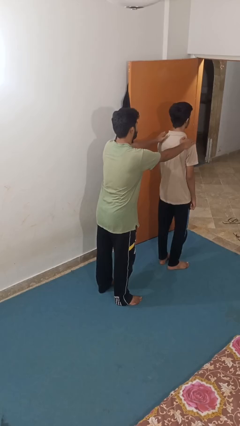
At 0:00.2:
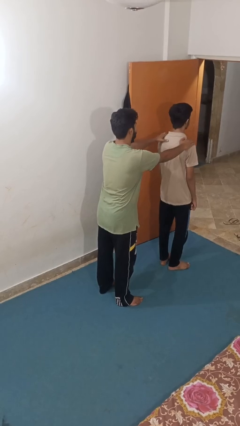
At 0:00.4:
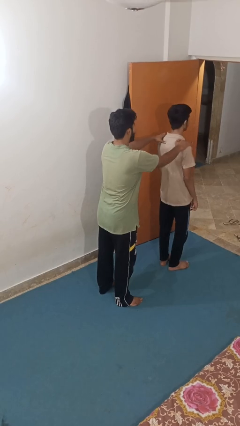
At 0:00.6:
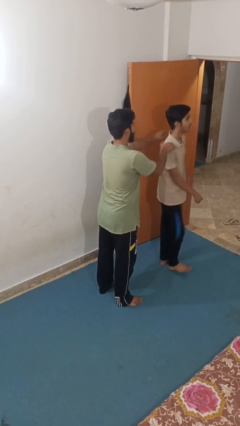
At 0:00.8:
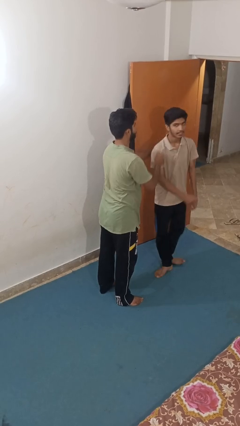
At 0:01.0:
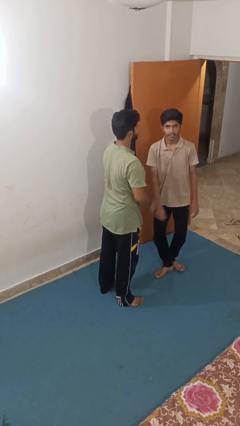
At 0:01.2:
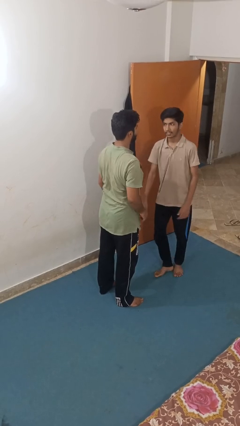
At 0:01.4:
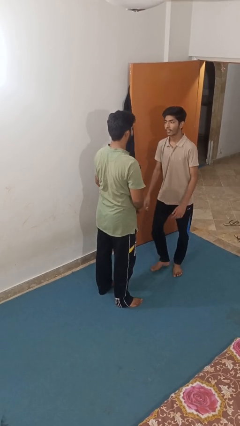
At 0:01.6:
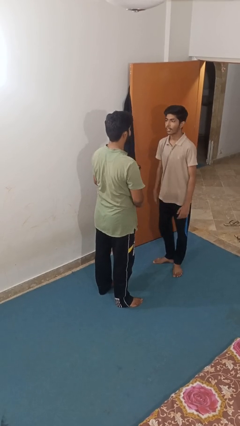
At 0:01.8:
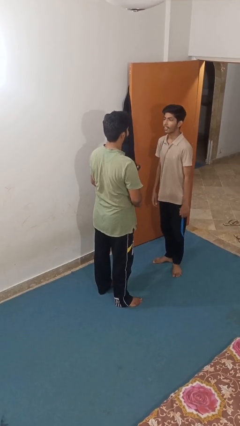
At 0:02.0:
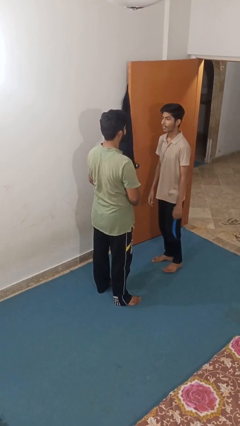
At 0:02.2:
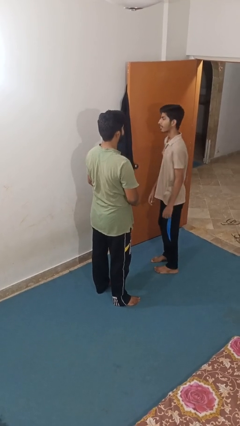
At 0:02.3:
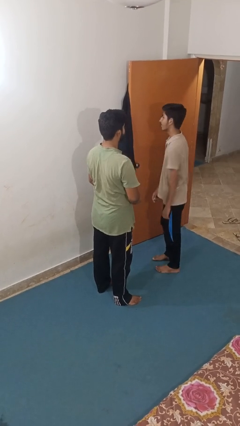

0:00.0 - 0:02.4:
person spins person around

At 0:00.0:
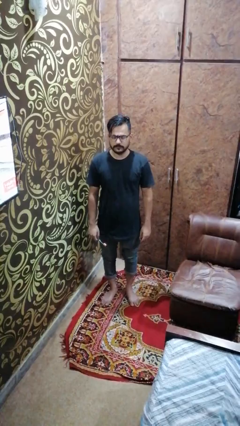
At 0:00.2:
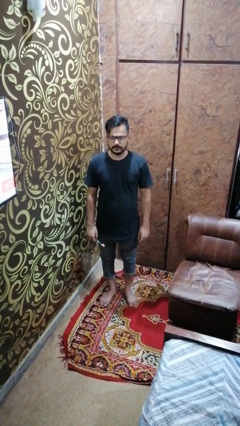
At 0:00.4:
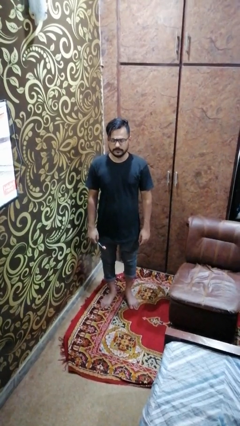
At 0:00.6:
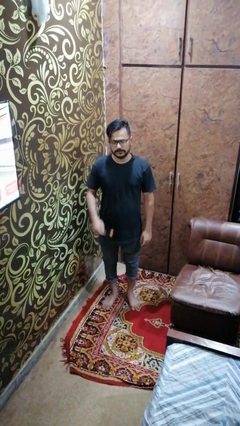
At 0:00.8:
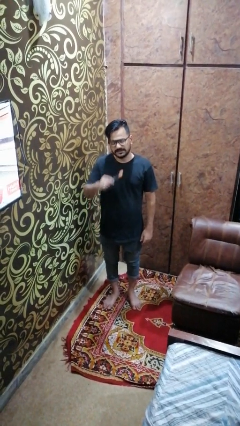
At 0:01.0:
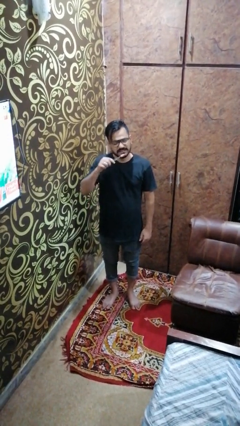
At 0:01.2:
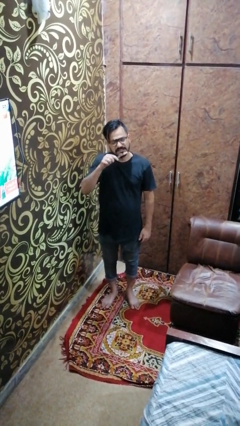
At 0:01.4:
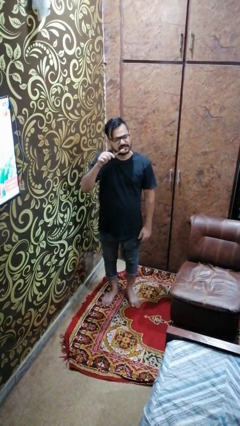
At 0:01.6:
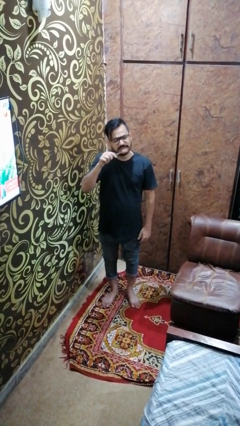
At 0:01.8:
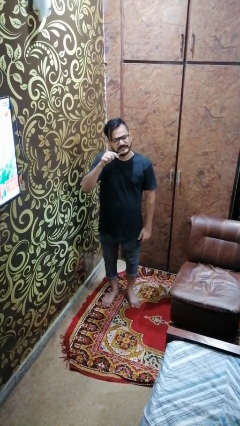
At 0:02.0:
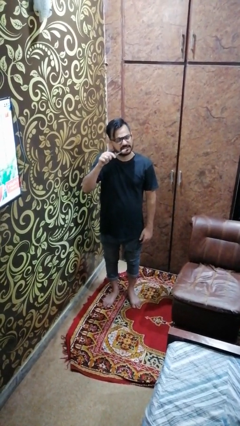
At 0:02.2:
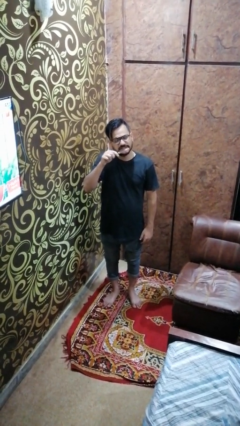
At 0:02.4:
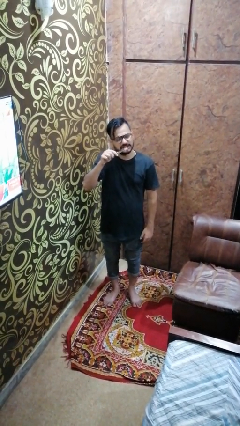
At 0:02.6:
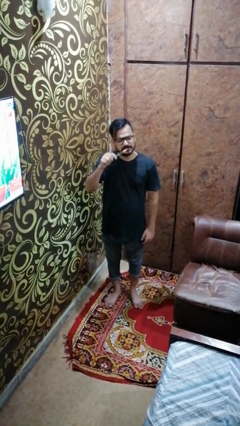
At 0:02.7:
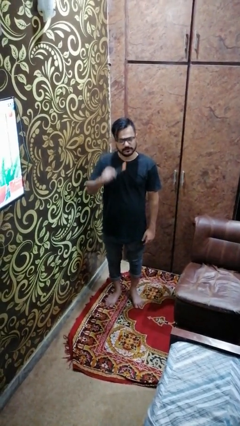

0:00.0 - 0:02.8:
person brushes teeth

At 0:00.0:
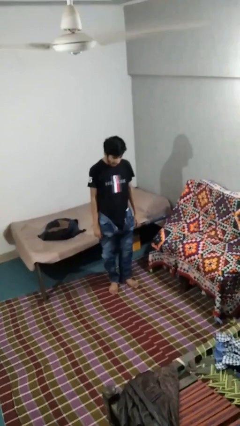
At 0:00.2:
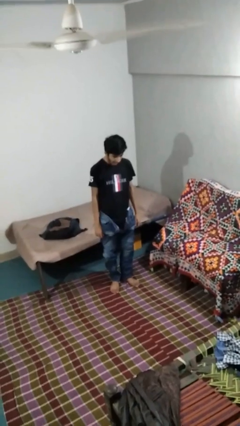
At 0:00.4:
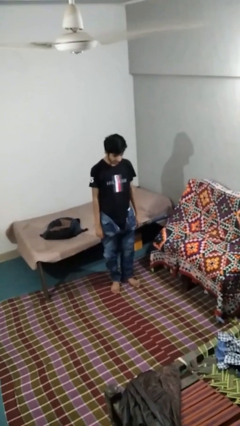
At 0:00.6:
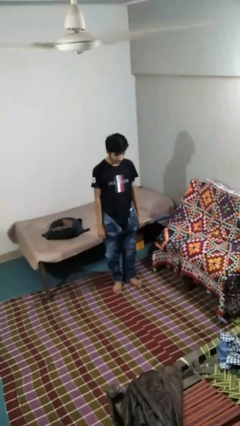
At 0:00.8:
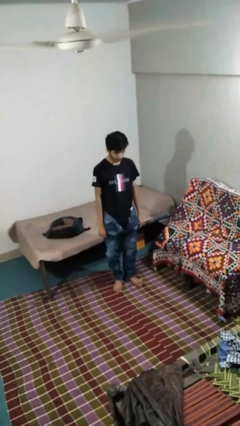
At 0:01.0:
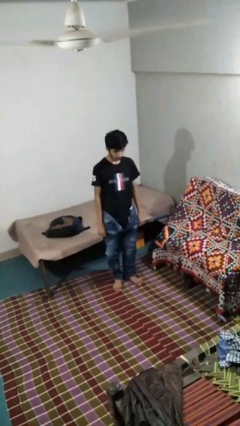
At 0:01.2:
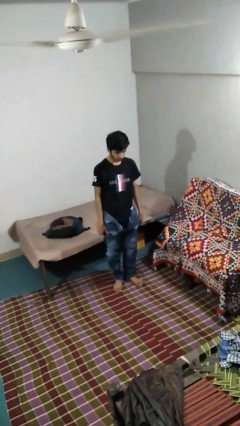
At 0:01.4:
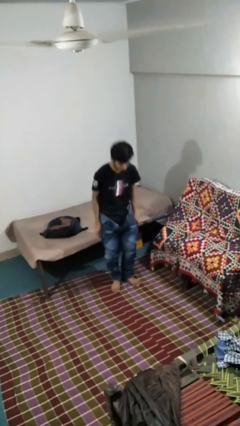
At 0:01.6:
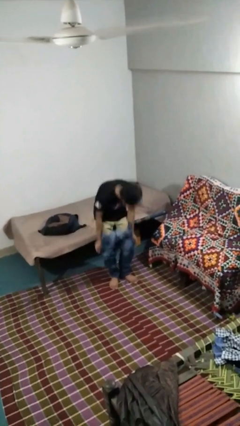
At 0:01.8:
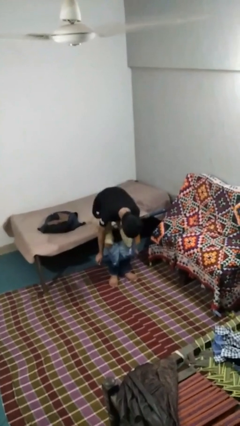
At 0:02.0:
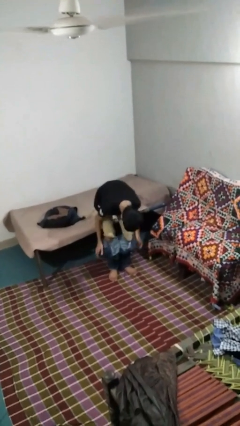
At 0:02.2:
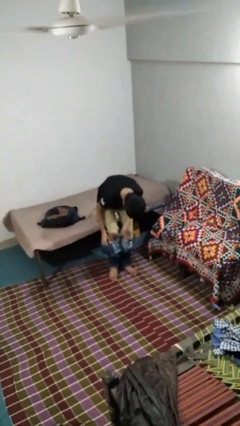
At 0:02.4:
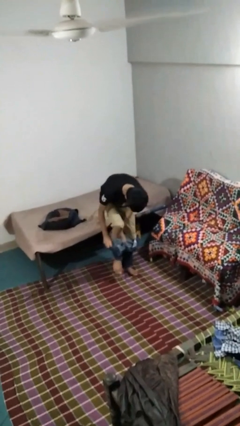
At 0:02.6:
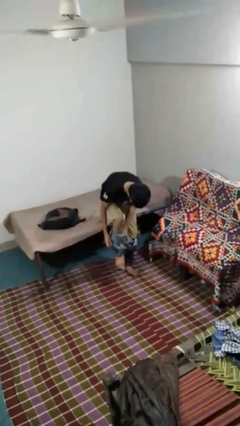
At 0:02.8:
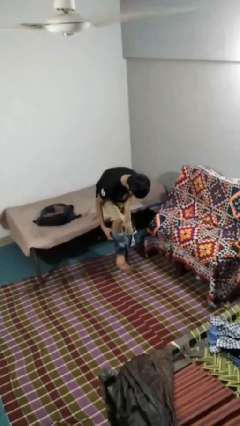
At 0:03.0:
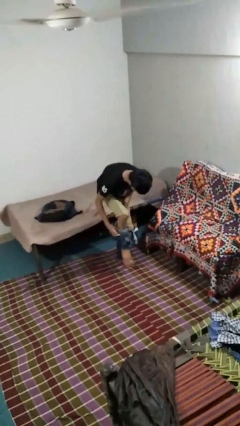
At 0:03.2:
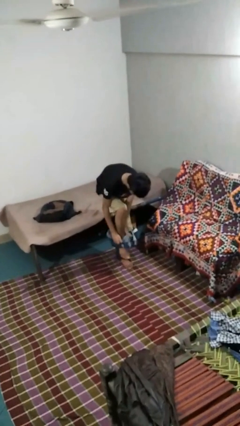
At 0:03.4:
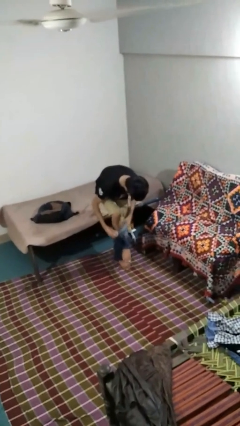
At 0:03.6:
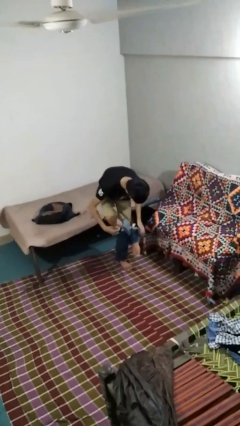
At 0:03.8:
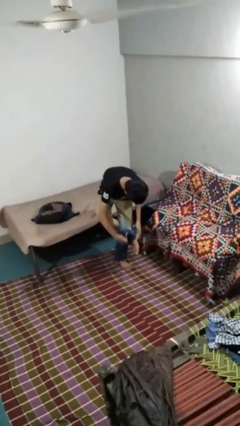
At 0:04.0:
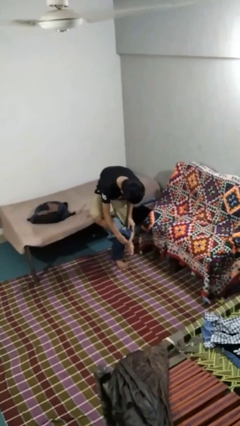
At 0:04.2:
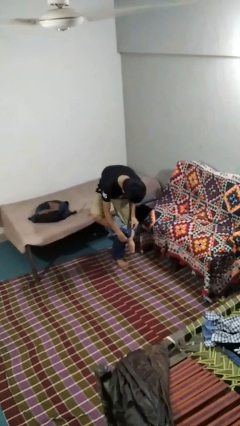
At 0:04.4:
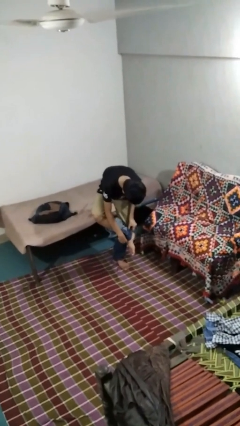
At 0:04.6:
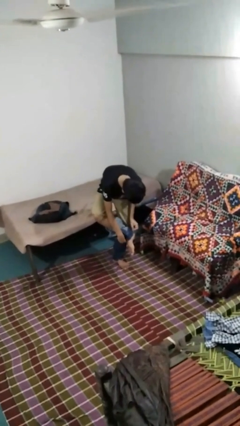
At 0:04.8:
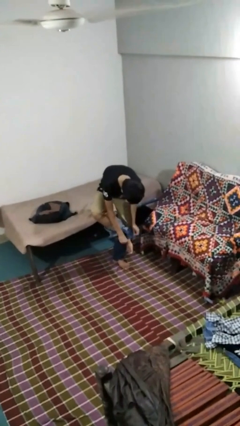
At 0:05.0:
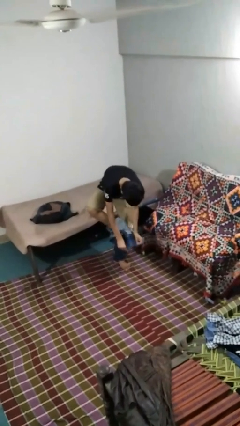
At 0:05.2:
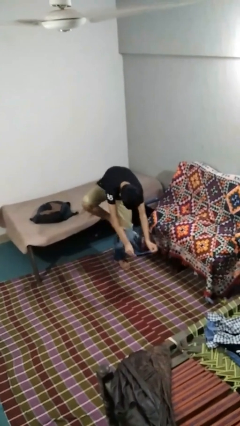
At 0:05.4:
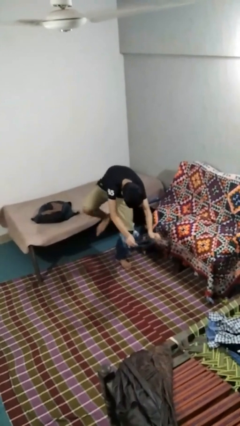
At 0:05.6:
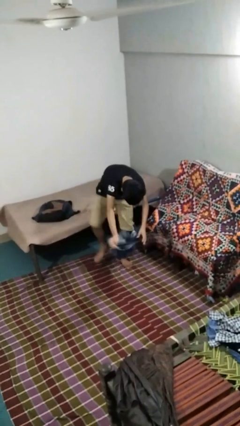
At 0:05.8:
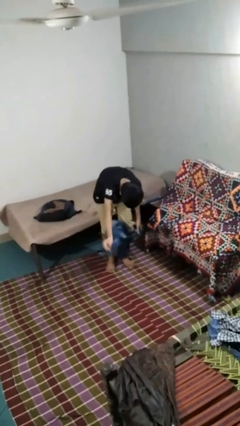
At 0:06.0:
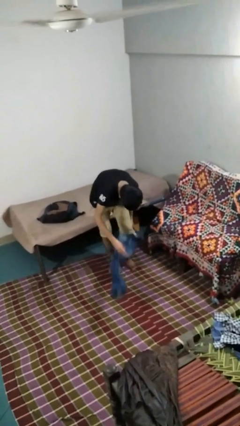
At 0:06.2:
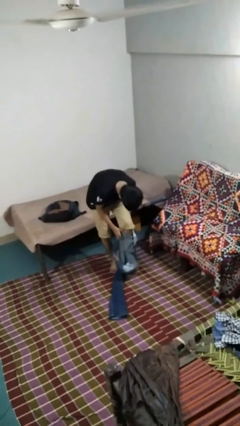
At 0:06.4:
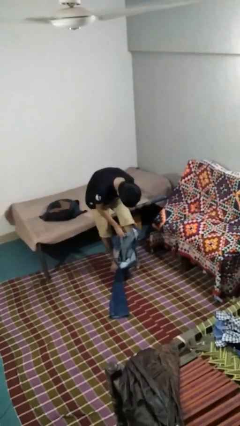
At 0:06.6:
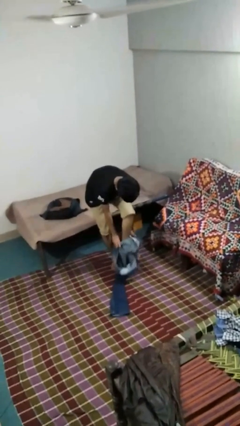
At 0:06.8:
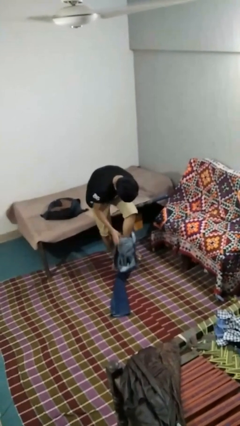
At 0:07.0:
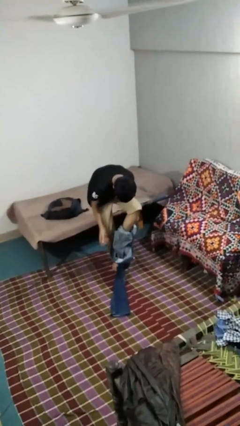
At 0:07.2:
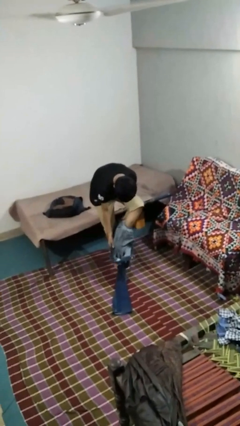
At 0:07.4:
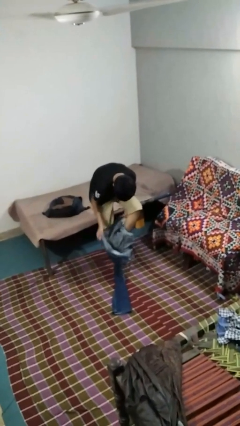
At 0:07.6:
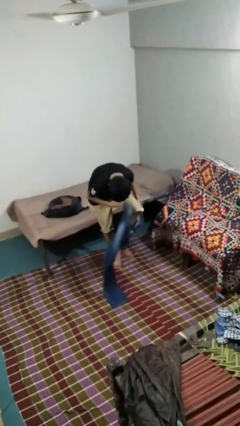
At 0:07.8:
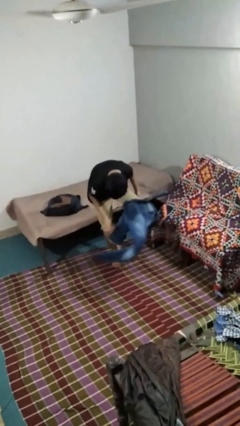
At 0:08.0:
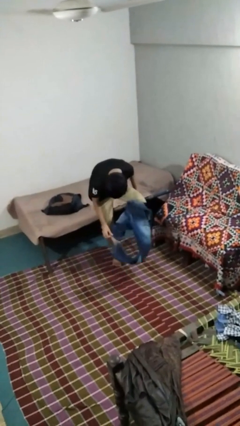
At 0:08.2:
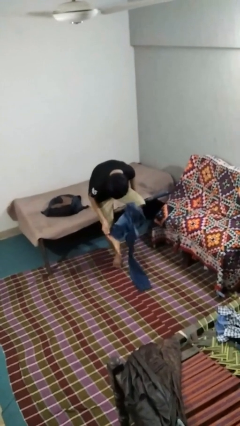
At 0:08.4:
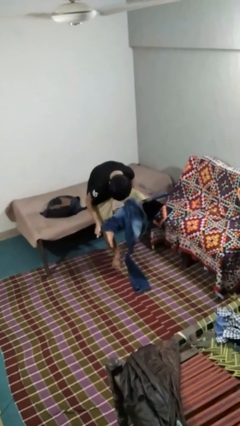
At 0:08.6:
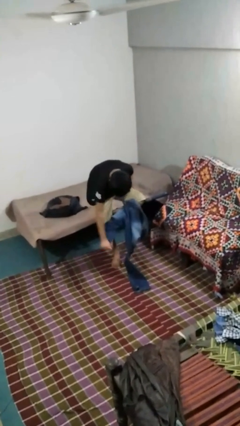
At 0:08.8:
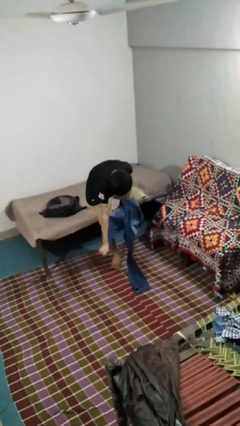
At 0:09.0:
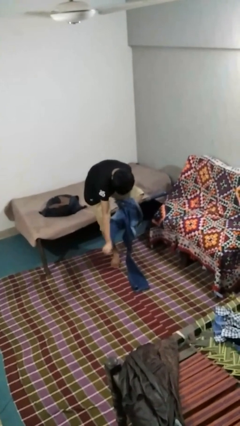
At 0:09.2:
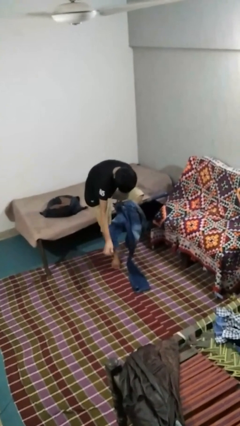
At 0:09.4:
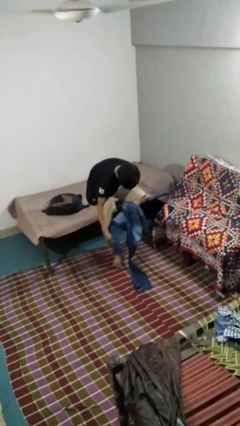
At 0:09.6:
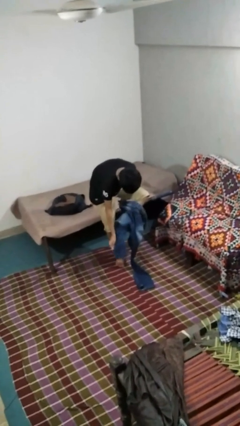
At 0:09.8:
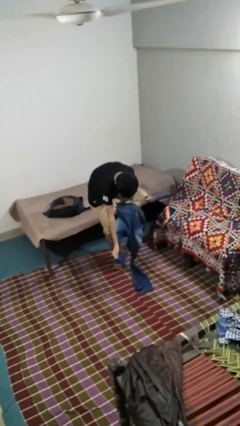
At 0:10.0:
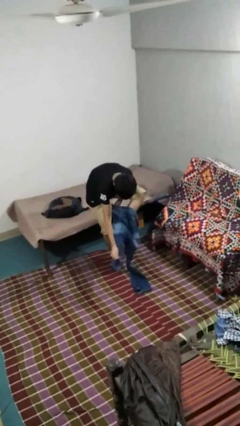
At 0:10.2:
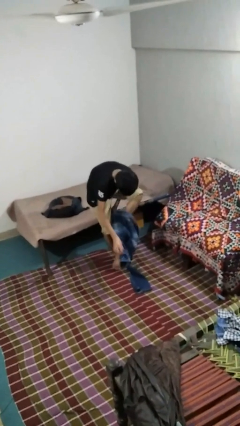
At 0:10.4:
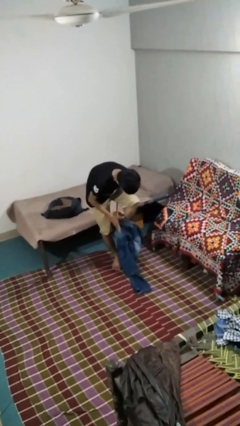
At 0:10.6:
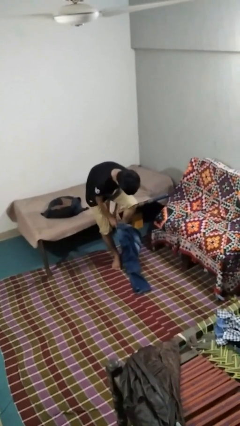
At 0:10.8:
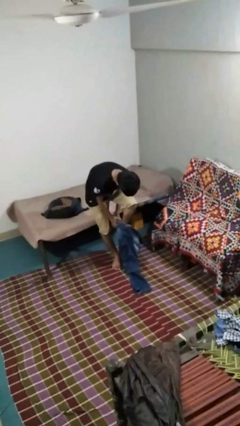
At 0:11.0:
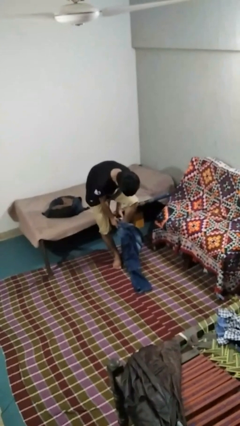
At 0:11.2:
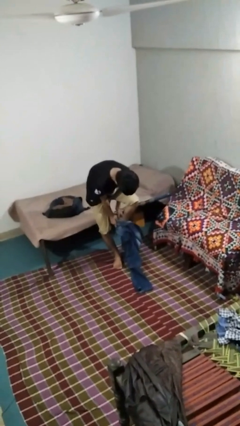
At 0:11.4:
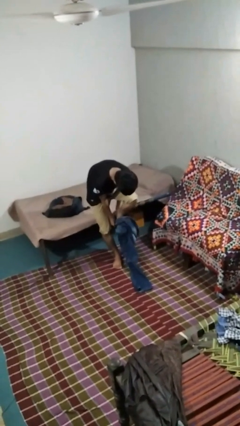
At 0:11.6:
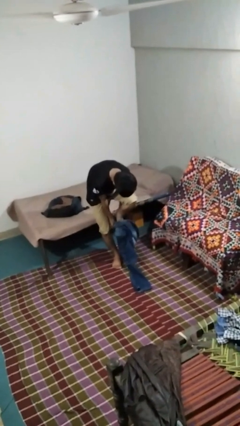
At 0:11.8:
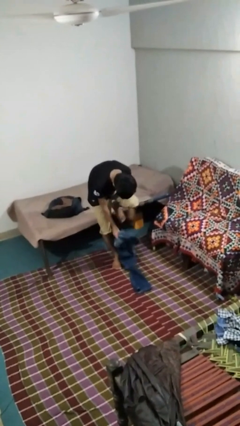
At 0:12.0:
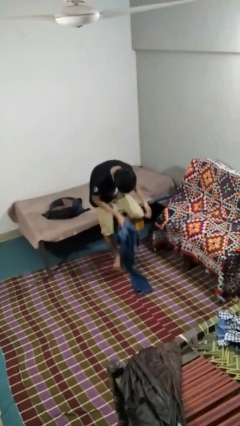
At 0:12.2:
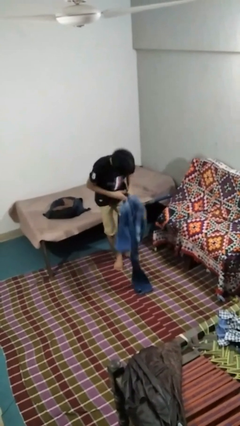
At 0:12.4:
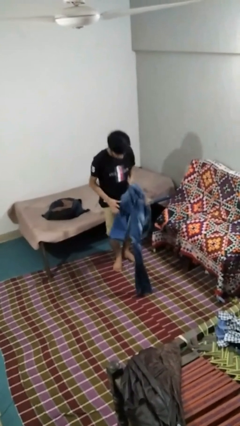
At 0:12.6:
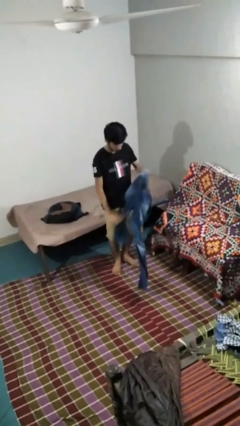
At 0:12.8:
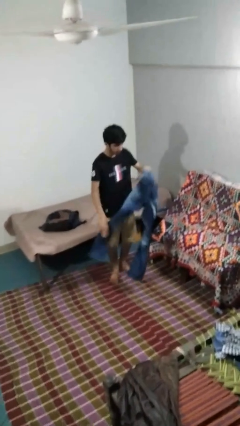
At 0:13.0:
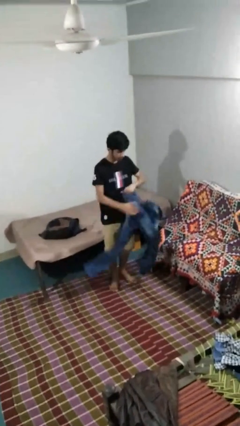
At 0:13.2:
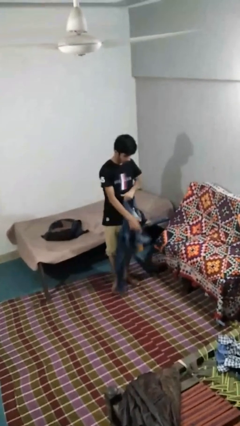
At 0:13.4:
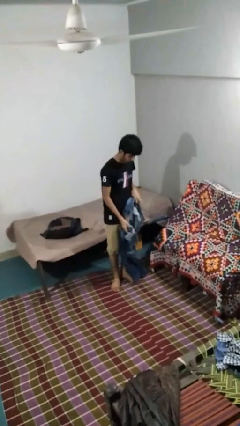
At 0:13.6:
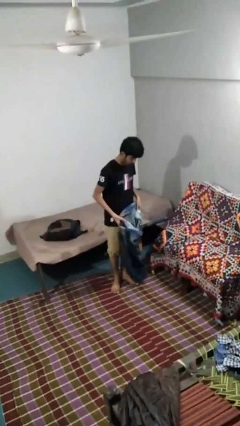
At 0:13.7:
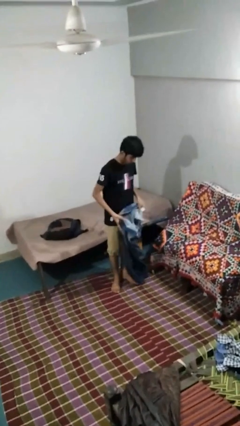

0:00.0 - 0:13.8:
person takes off pants
